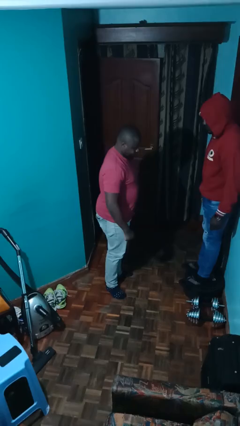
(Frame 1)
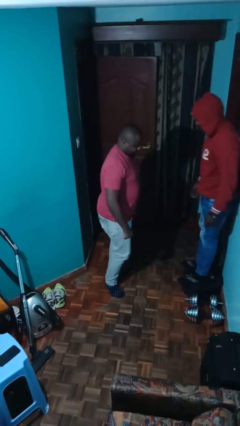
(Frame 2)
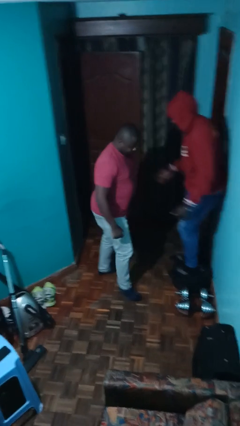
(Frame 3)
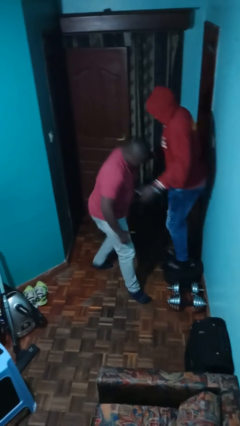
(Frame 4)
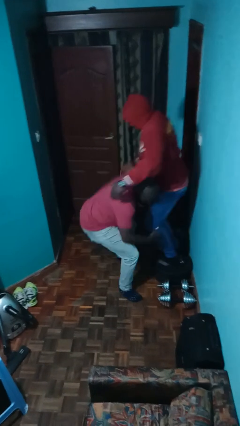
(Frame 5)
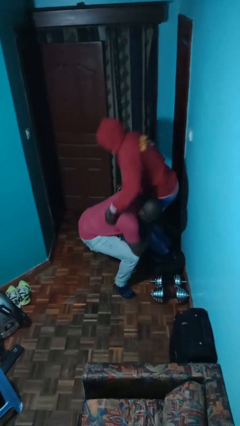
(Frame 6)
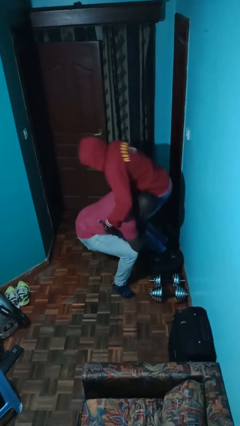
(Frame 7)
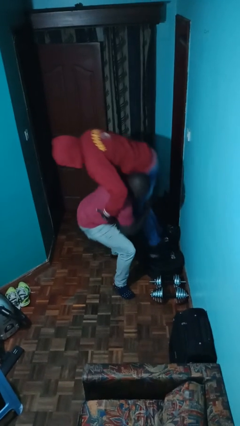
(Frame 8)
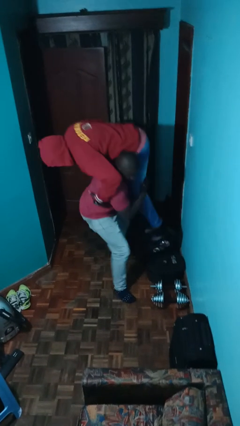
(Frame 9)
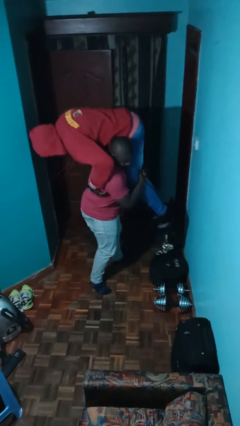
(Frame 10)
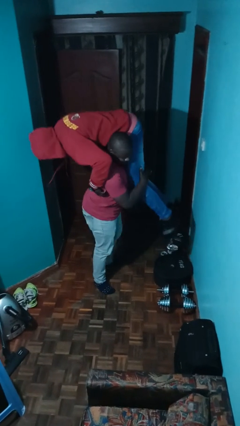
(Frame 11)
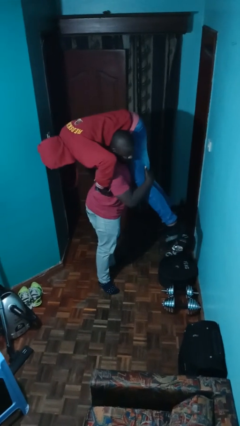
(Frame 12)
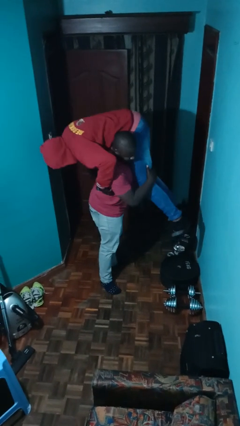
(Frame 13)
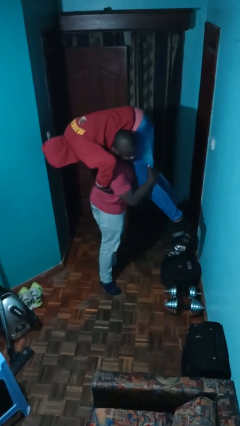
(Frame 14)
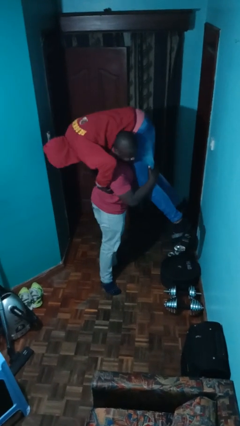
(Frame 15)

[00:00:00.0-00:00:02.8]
person carries person over shoulder

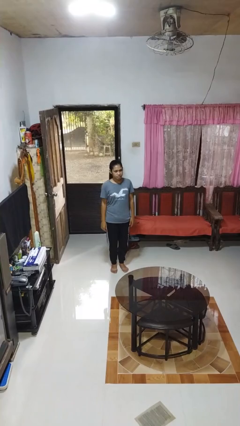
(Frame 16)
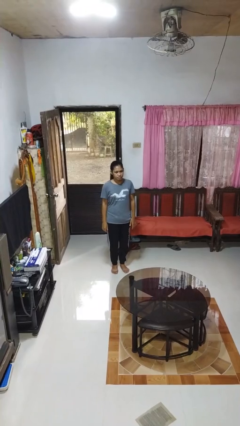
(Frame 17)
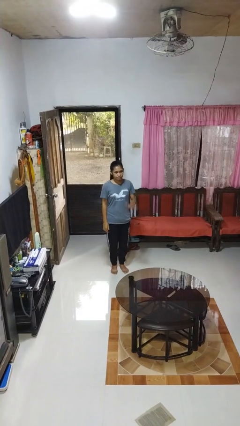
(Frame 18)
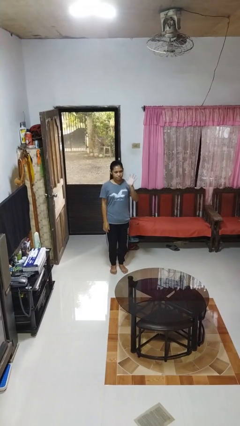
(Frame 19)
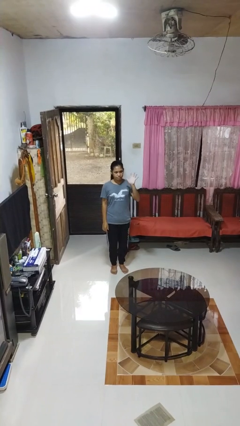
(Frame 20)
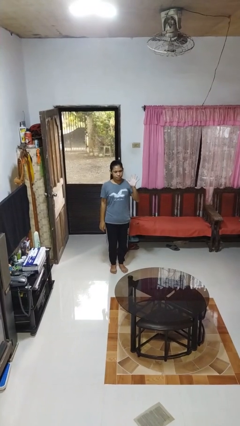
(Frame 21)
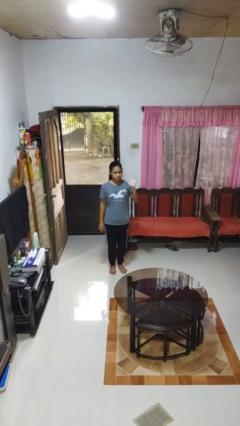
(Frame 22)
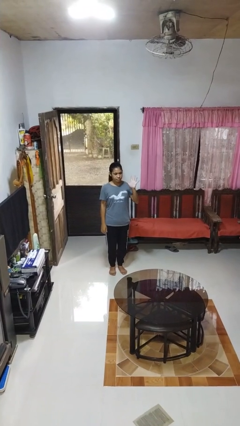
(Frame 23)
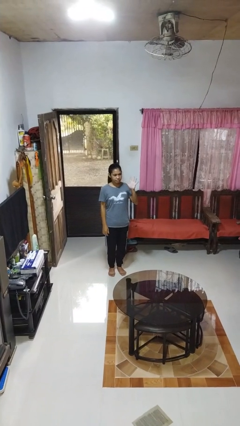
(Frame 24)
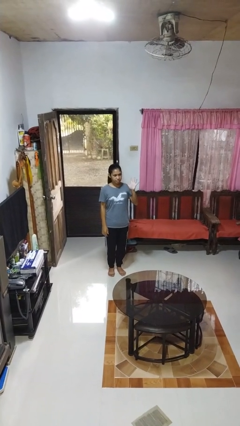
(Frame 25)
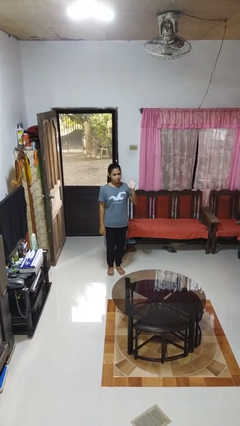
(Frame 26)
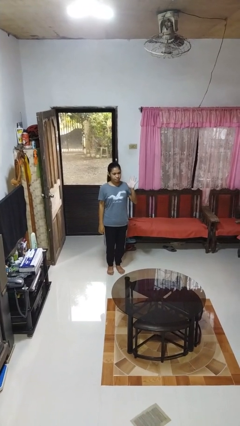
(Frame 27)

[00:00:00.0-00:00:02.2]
person gestures number five

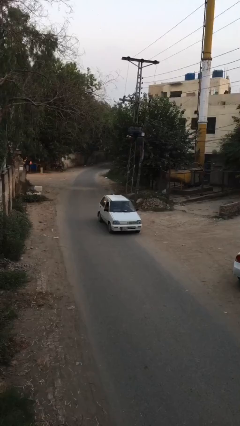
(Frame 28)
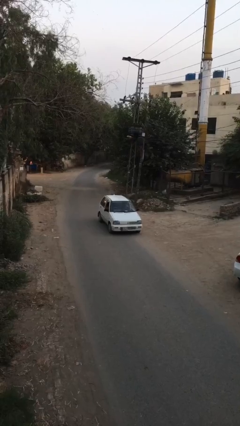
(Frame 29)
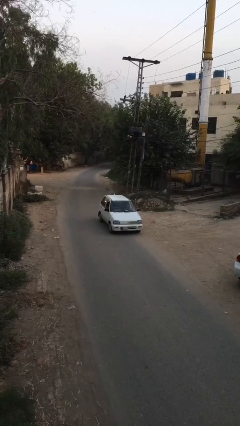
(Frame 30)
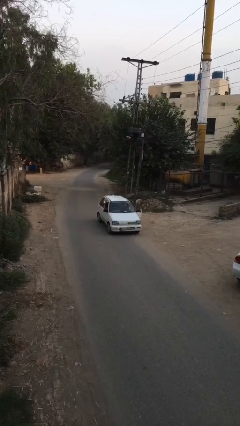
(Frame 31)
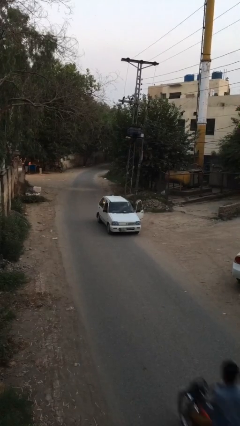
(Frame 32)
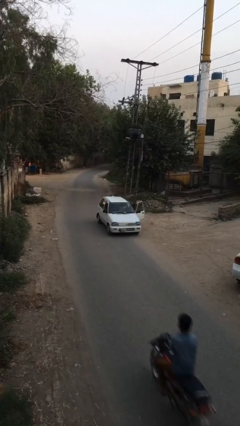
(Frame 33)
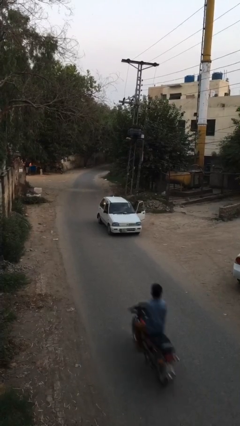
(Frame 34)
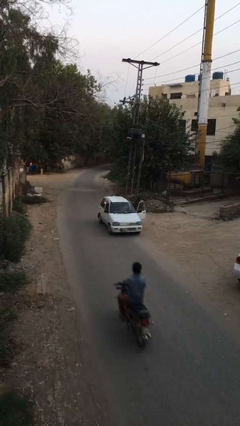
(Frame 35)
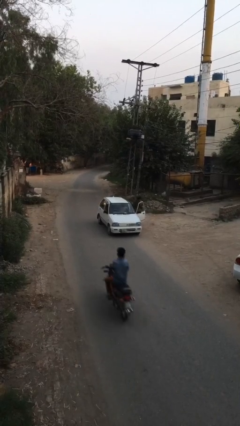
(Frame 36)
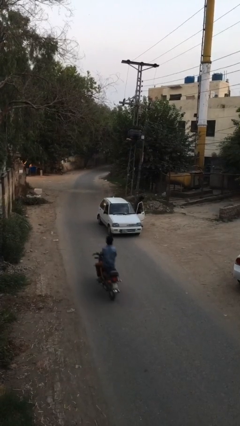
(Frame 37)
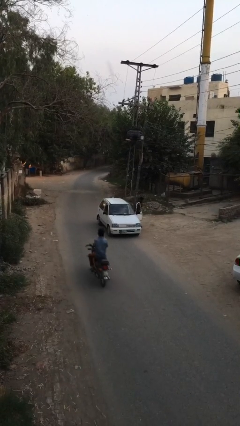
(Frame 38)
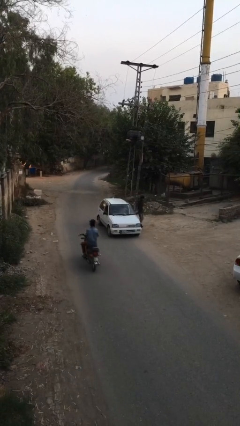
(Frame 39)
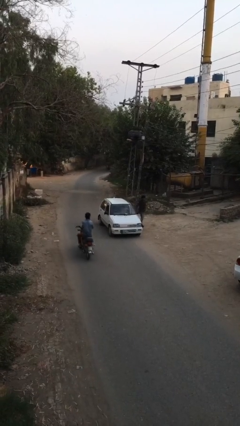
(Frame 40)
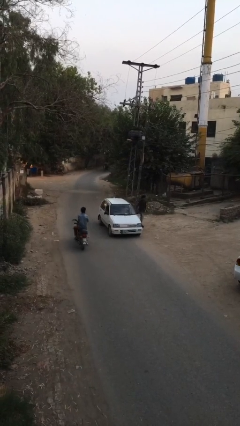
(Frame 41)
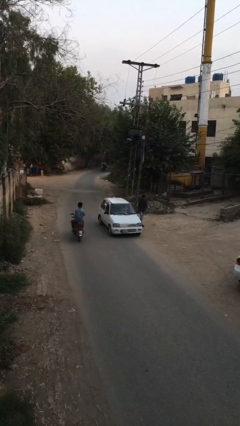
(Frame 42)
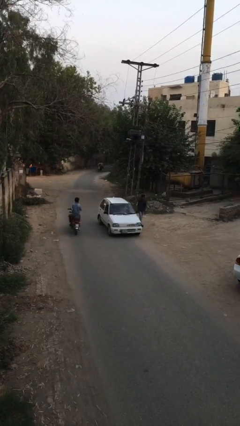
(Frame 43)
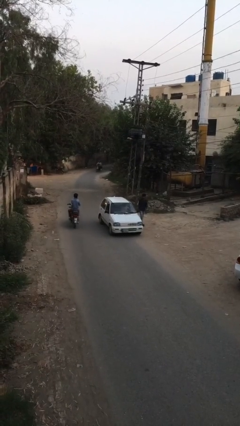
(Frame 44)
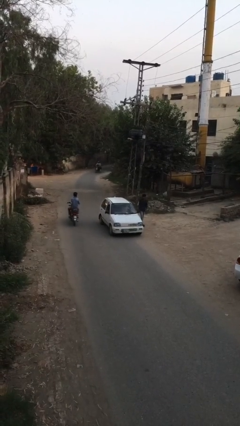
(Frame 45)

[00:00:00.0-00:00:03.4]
car drops off person

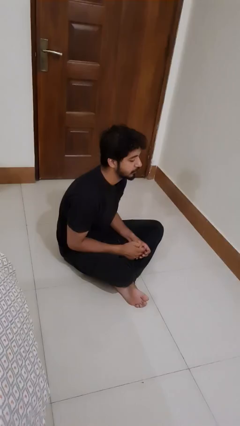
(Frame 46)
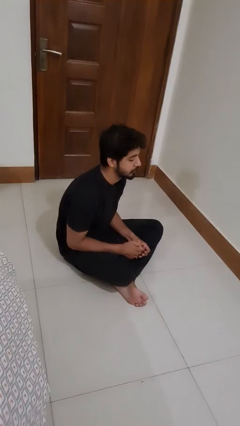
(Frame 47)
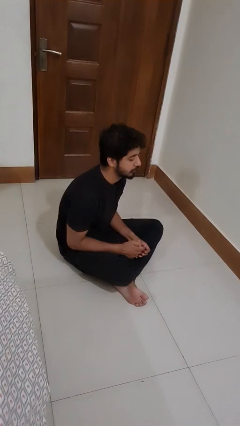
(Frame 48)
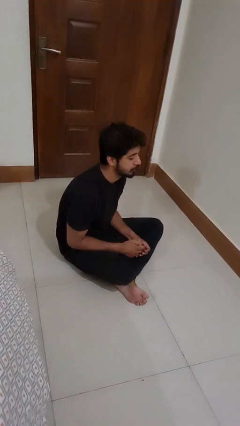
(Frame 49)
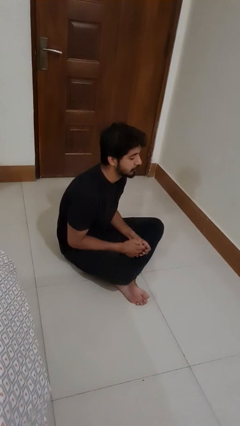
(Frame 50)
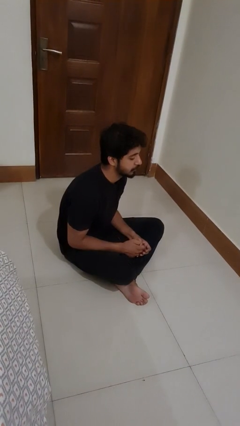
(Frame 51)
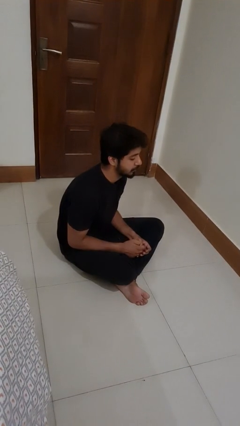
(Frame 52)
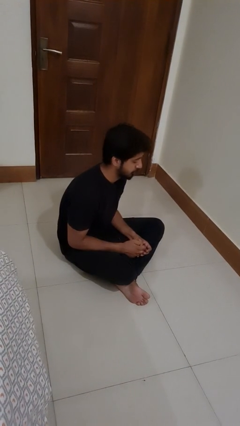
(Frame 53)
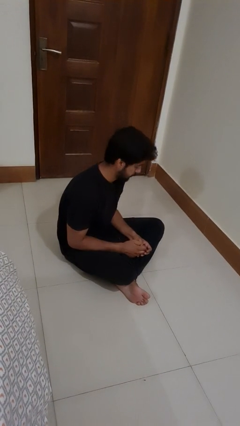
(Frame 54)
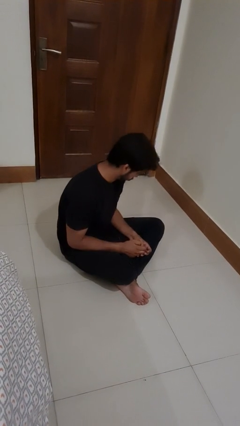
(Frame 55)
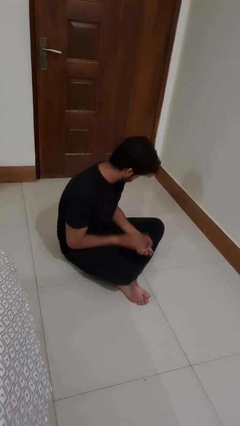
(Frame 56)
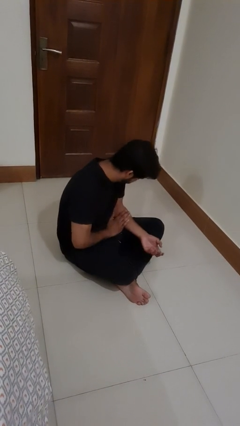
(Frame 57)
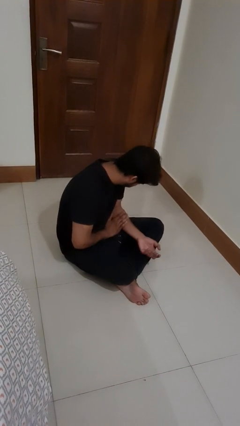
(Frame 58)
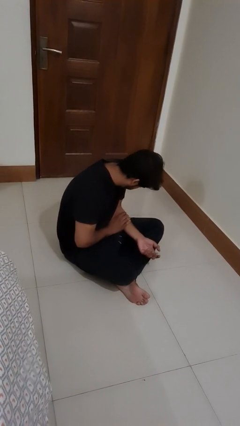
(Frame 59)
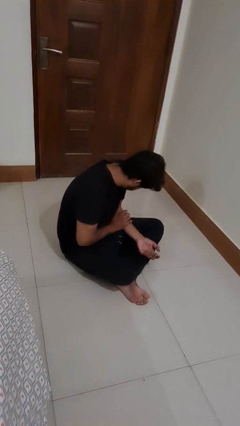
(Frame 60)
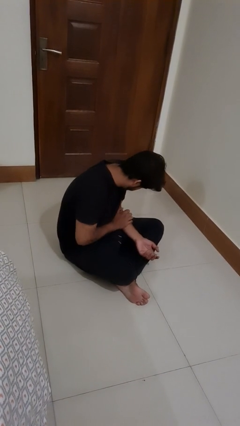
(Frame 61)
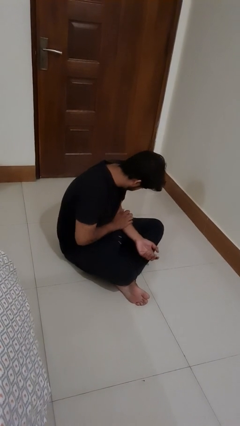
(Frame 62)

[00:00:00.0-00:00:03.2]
person swats bug

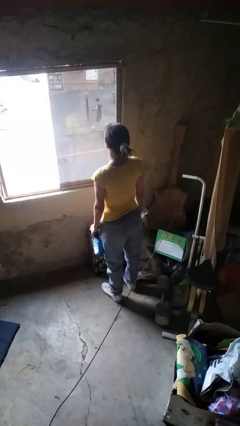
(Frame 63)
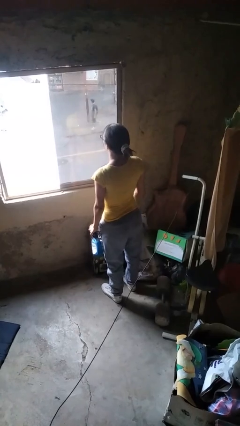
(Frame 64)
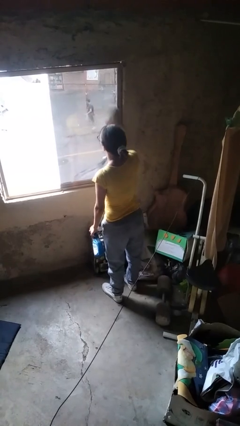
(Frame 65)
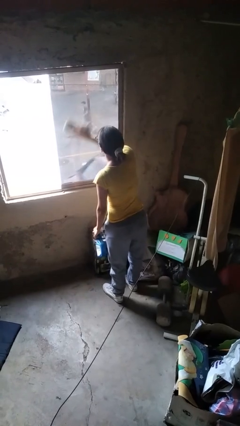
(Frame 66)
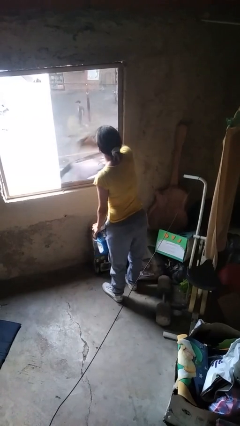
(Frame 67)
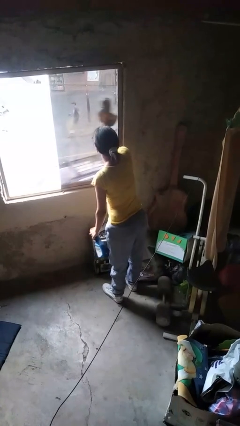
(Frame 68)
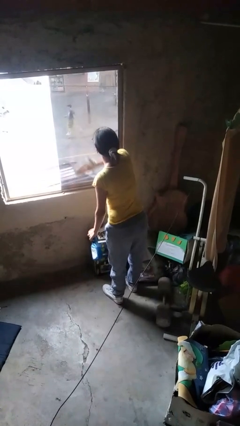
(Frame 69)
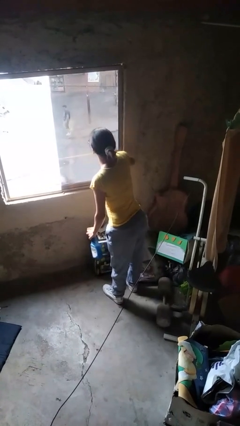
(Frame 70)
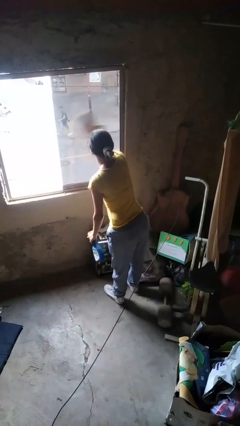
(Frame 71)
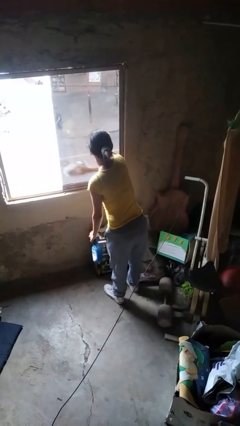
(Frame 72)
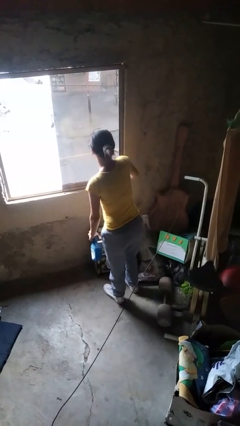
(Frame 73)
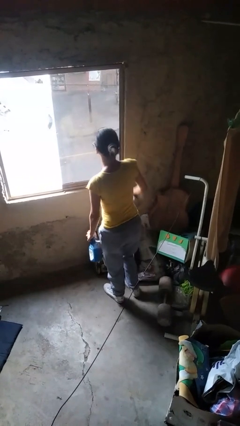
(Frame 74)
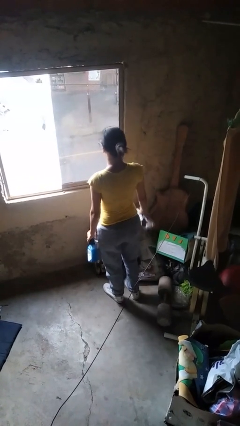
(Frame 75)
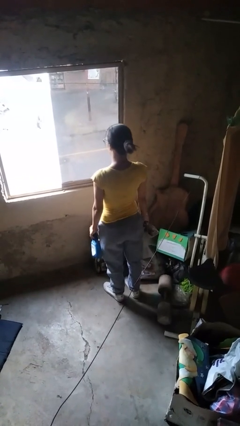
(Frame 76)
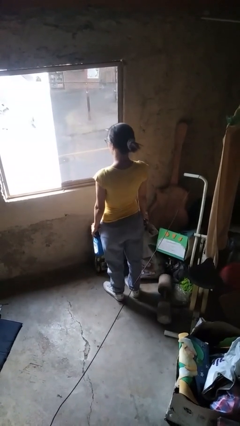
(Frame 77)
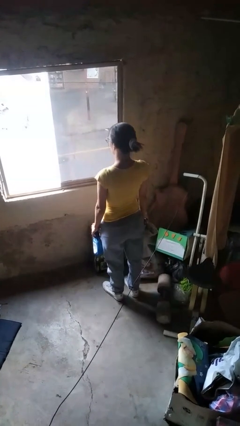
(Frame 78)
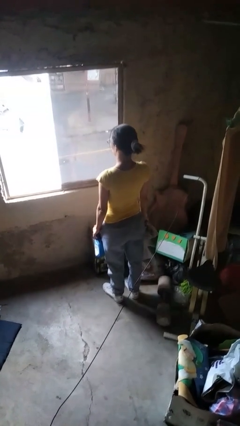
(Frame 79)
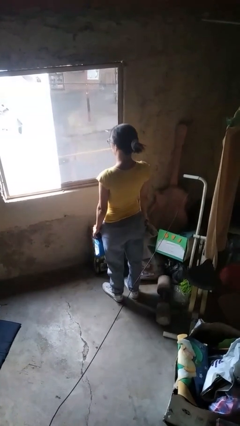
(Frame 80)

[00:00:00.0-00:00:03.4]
person washes window

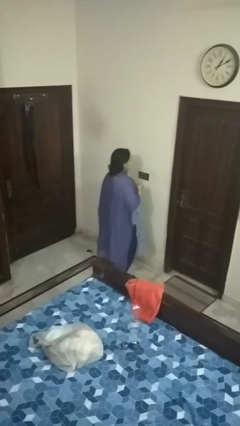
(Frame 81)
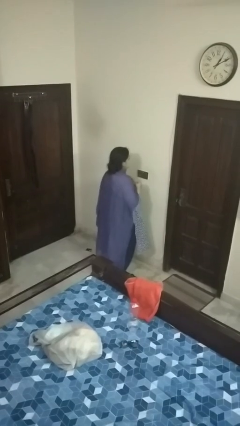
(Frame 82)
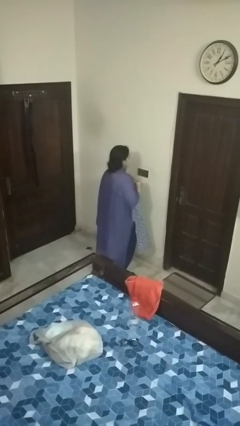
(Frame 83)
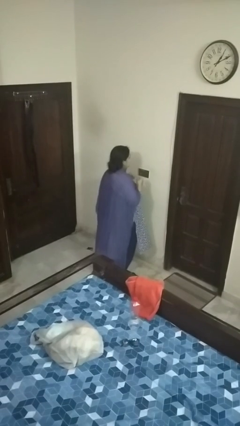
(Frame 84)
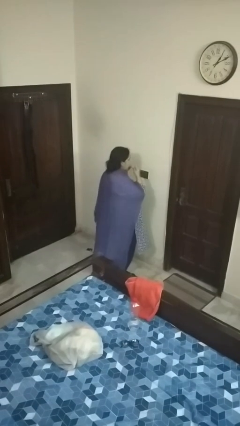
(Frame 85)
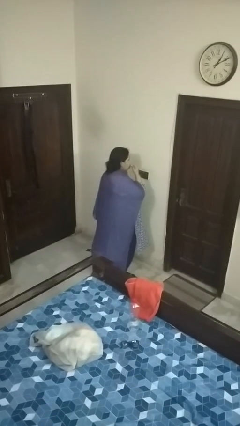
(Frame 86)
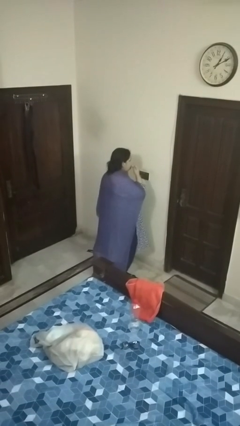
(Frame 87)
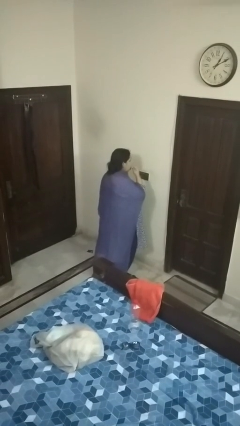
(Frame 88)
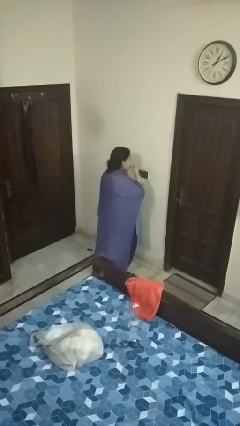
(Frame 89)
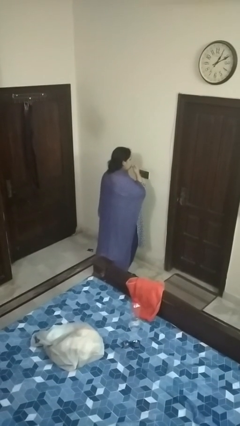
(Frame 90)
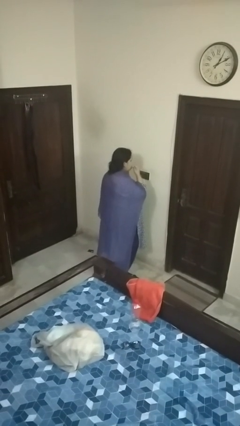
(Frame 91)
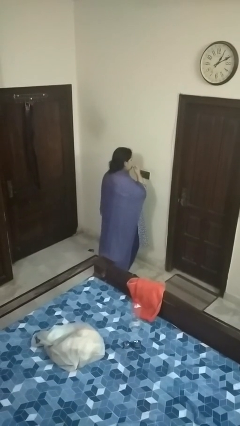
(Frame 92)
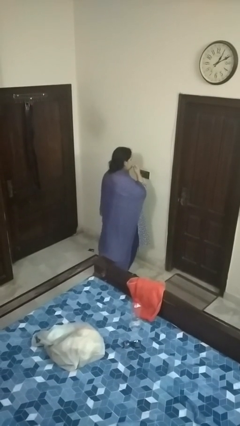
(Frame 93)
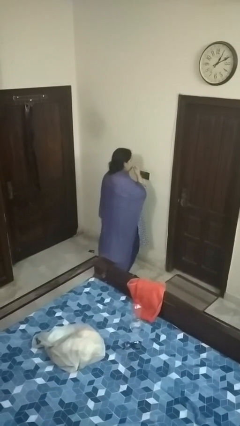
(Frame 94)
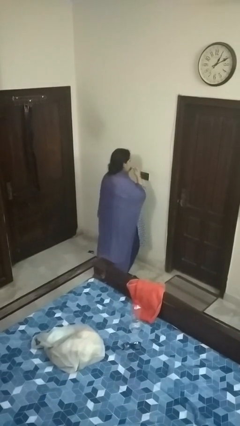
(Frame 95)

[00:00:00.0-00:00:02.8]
person flosses
